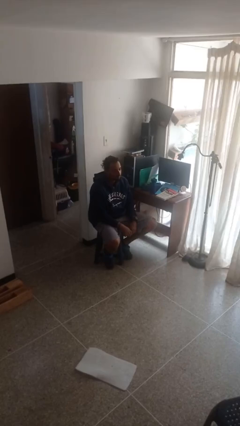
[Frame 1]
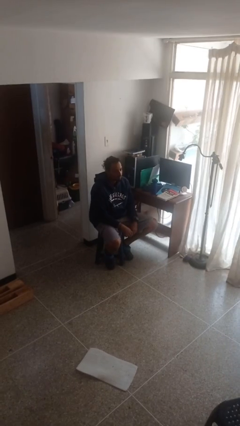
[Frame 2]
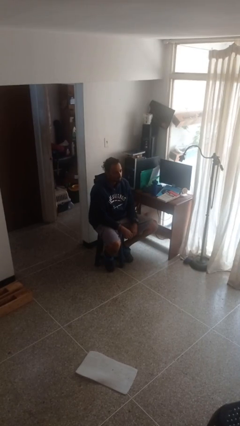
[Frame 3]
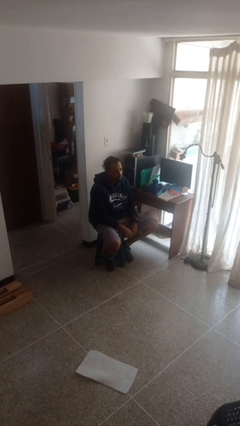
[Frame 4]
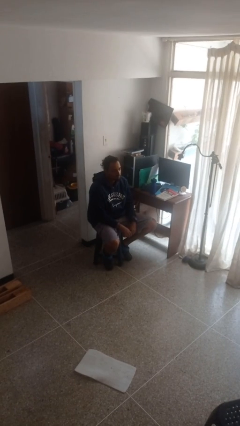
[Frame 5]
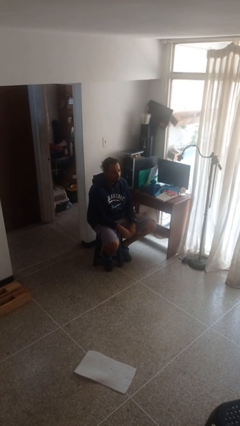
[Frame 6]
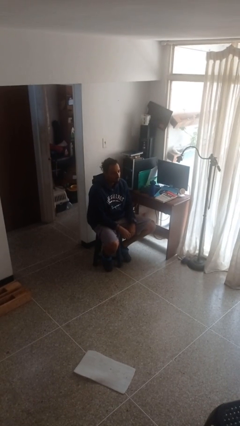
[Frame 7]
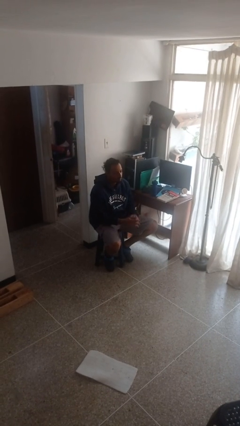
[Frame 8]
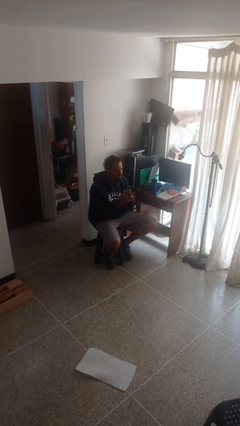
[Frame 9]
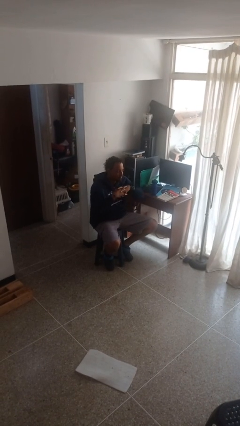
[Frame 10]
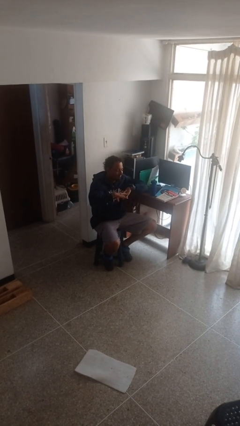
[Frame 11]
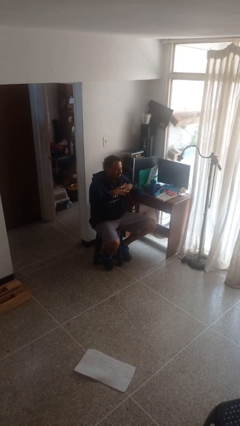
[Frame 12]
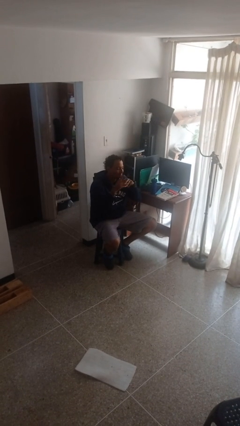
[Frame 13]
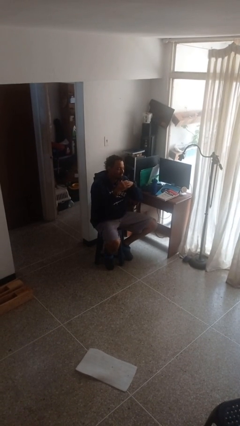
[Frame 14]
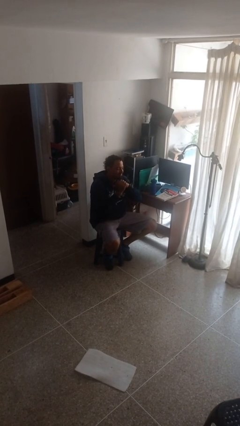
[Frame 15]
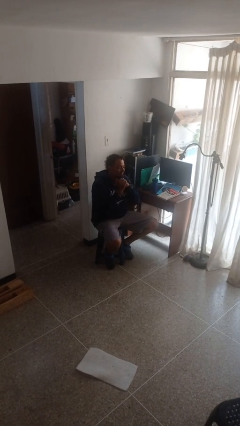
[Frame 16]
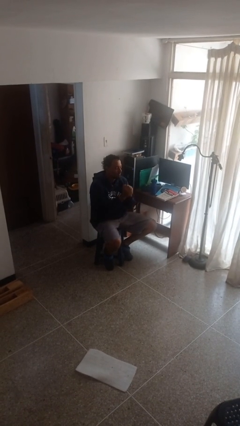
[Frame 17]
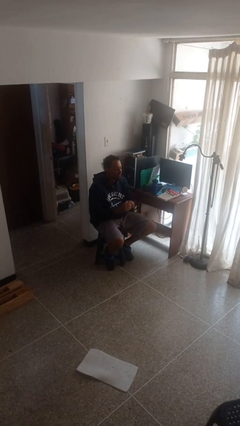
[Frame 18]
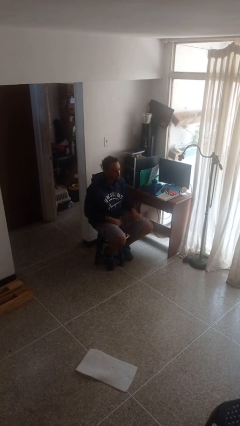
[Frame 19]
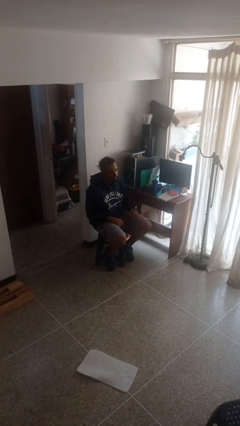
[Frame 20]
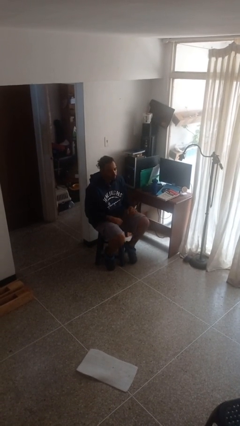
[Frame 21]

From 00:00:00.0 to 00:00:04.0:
person cracks knuckles

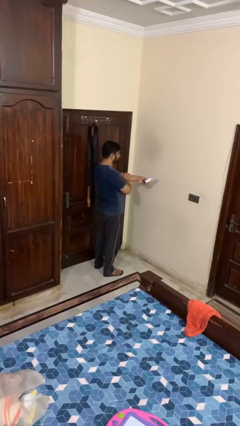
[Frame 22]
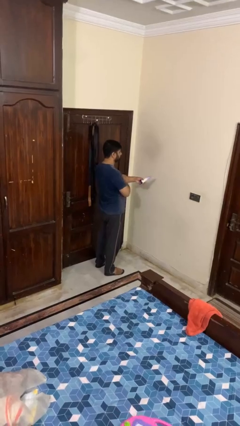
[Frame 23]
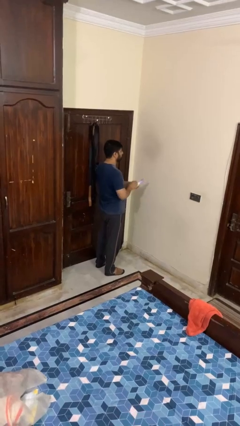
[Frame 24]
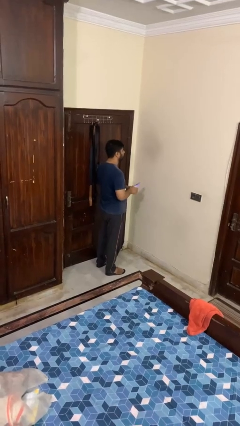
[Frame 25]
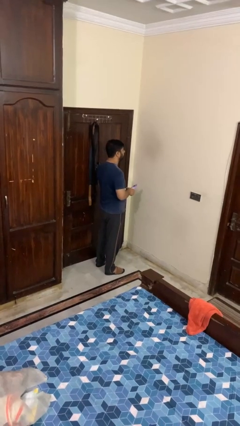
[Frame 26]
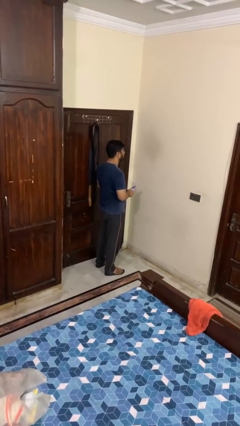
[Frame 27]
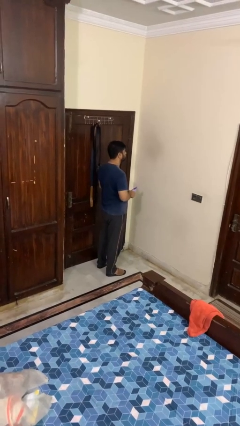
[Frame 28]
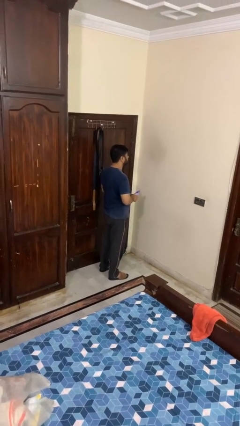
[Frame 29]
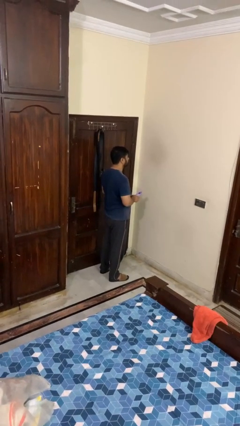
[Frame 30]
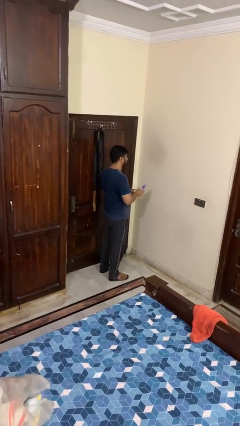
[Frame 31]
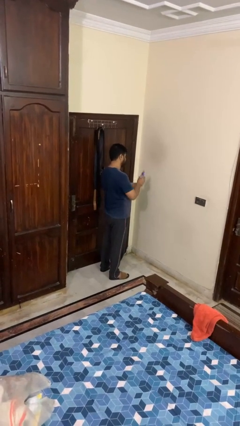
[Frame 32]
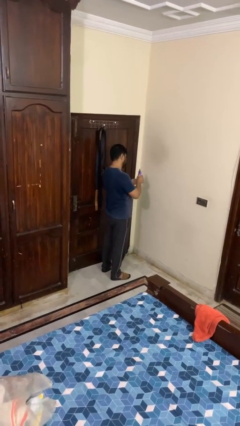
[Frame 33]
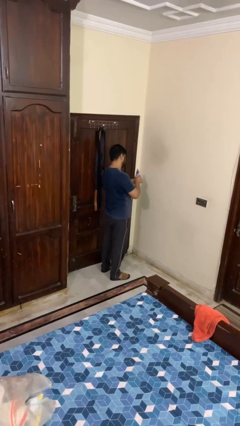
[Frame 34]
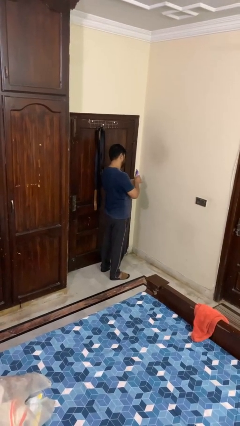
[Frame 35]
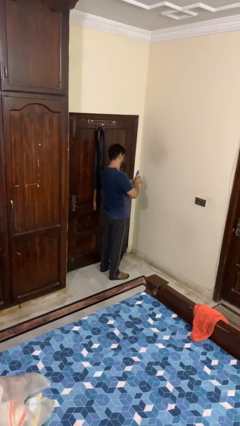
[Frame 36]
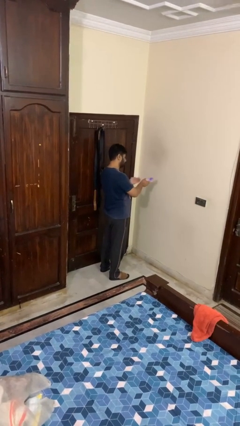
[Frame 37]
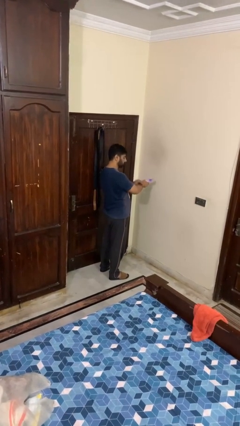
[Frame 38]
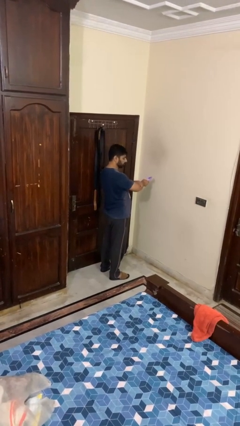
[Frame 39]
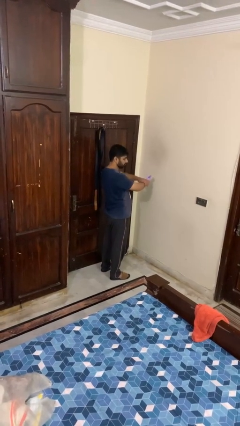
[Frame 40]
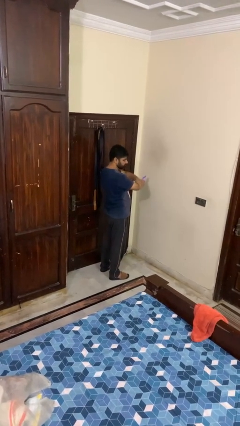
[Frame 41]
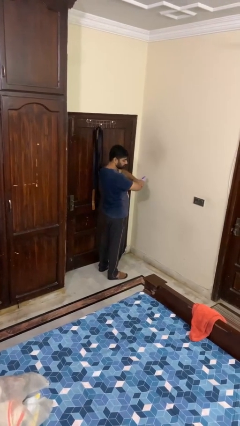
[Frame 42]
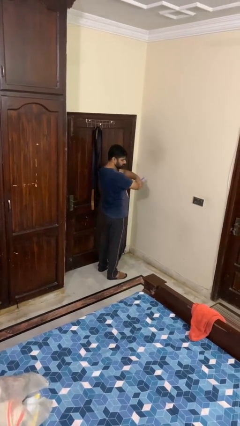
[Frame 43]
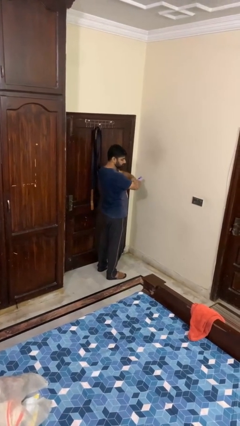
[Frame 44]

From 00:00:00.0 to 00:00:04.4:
person applies sunscreen

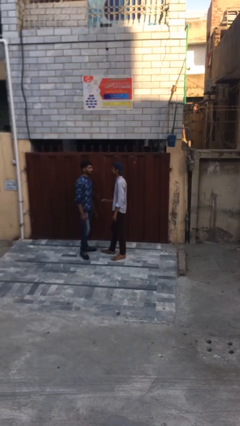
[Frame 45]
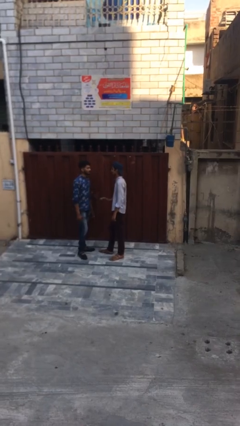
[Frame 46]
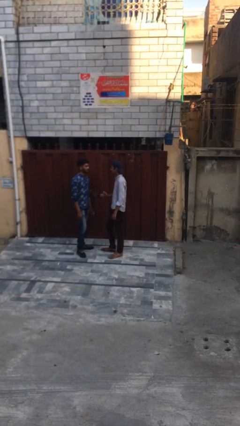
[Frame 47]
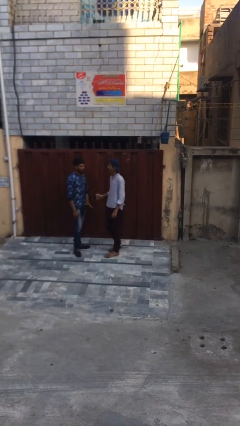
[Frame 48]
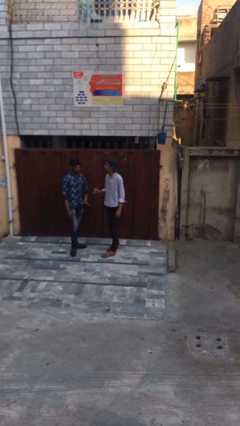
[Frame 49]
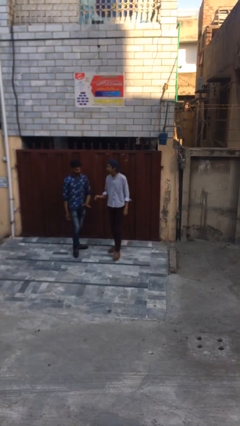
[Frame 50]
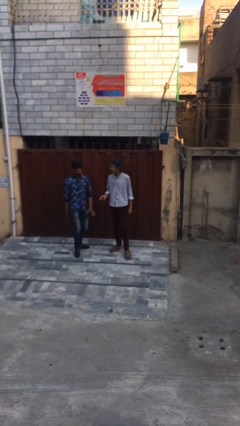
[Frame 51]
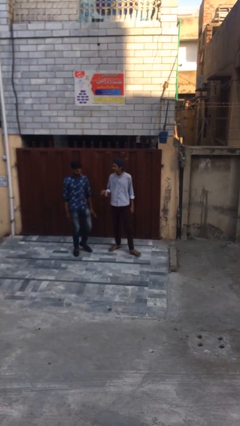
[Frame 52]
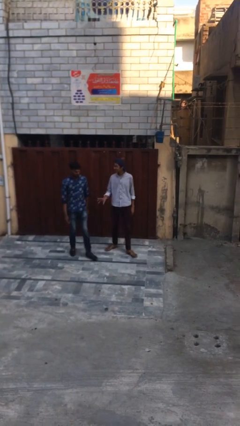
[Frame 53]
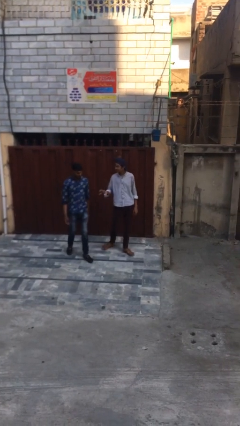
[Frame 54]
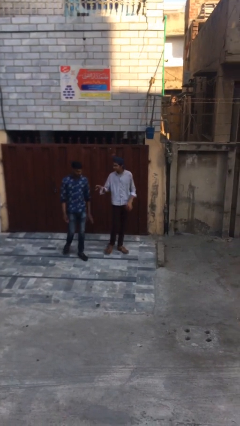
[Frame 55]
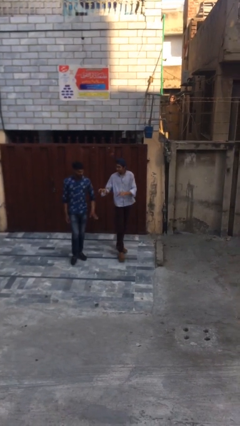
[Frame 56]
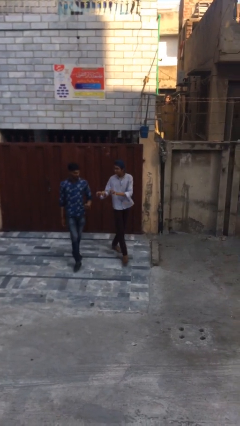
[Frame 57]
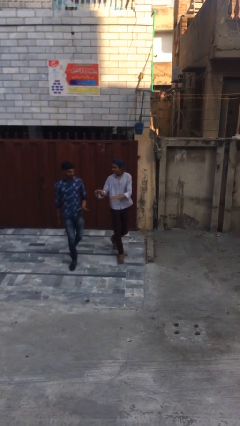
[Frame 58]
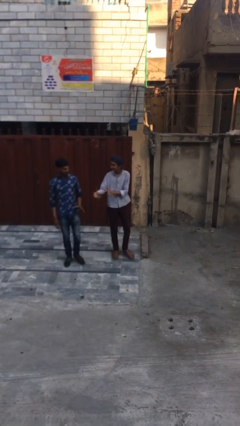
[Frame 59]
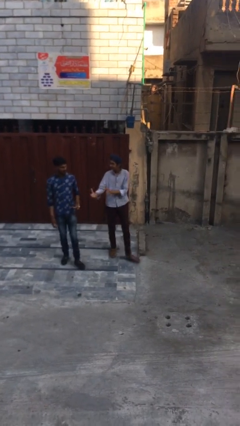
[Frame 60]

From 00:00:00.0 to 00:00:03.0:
person talks to person

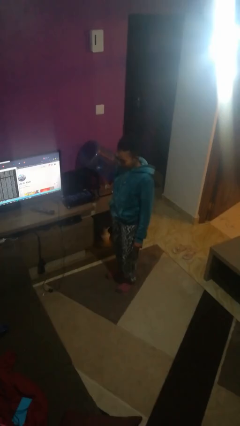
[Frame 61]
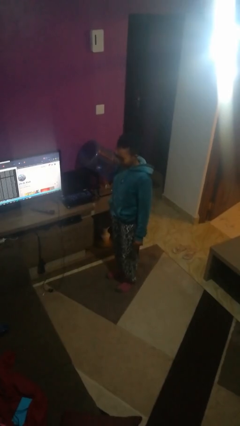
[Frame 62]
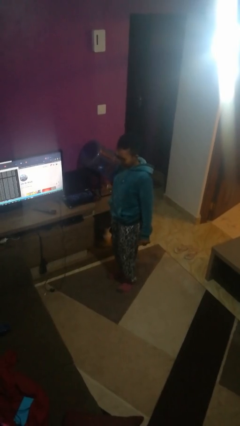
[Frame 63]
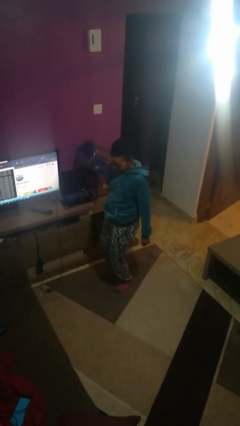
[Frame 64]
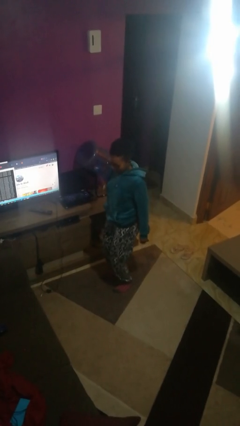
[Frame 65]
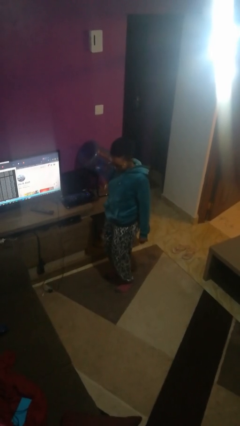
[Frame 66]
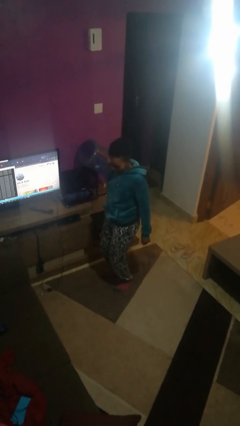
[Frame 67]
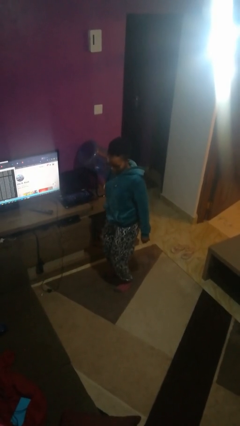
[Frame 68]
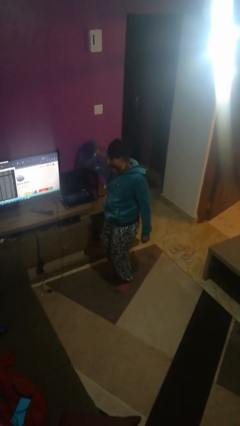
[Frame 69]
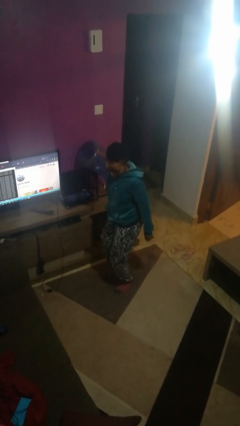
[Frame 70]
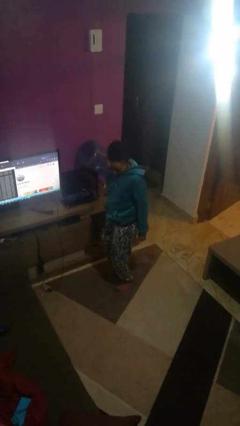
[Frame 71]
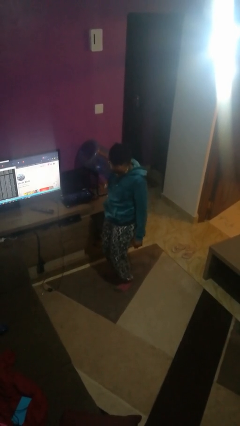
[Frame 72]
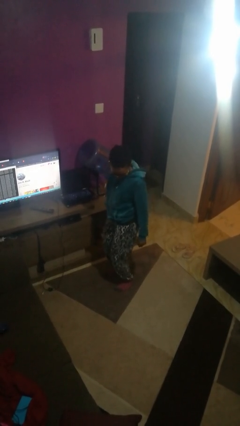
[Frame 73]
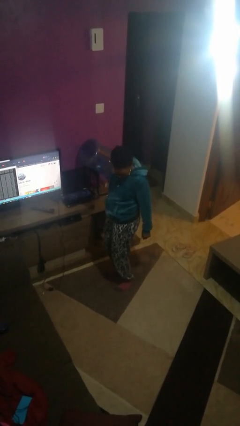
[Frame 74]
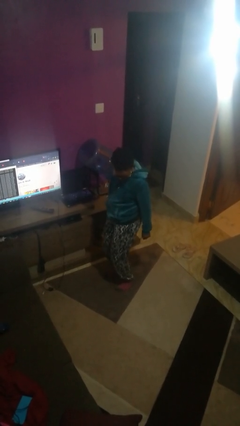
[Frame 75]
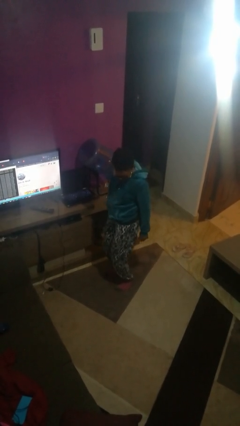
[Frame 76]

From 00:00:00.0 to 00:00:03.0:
person wiggles hips

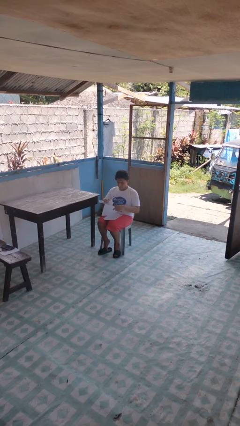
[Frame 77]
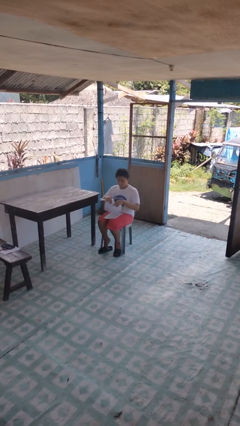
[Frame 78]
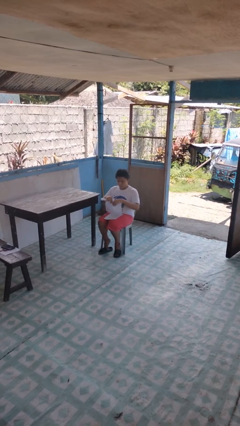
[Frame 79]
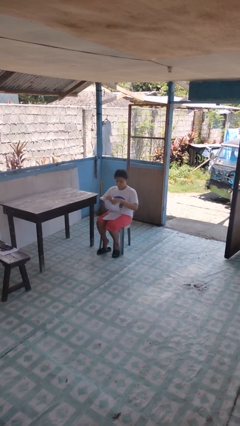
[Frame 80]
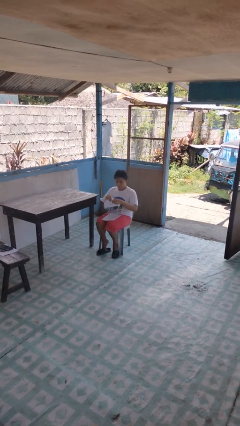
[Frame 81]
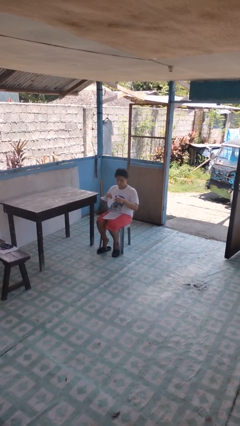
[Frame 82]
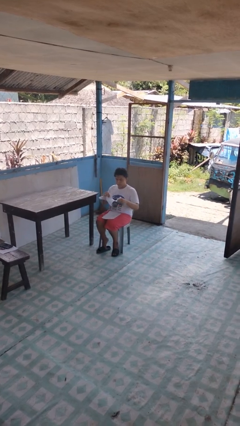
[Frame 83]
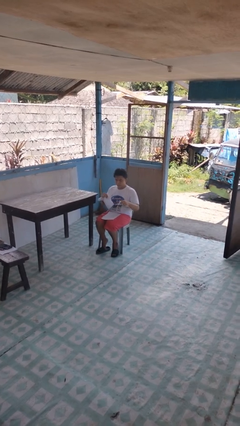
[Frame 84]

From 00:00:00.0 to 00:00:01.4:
person tears paper

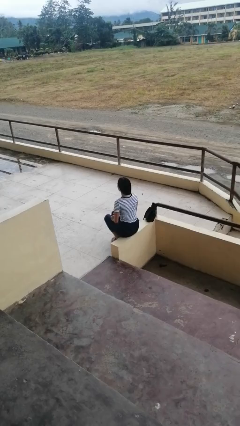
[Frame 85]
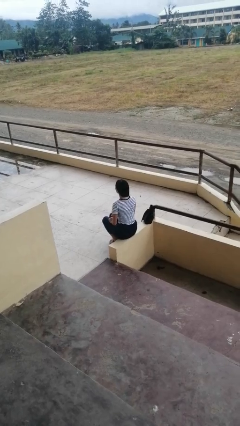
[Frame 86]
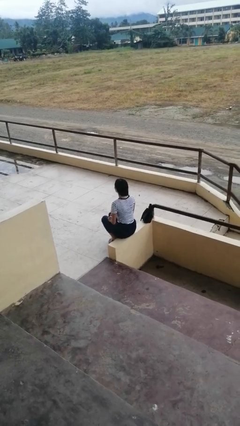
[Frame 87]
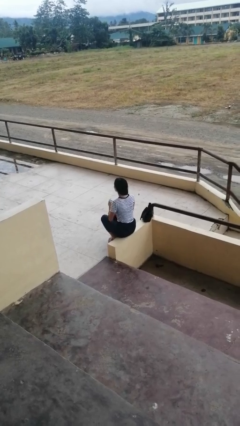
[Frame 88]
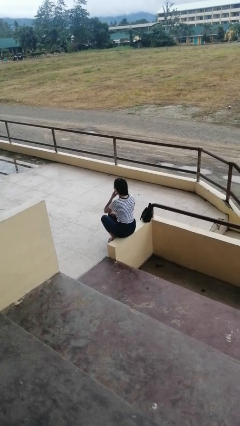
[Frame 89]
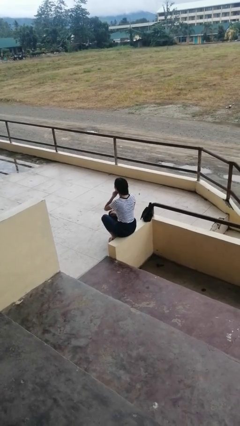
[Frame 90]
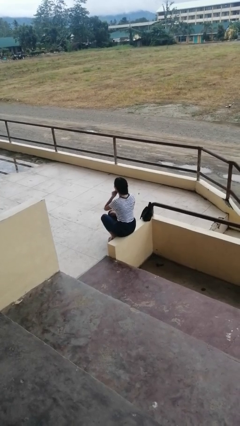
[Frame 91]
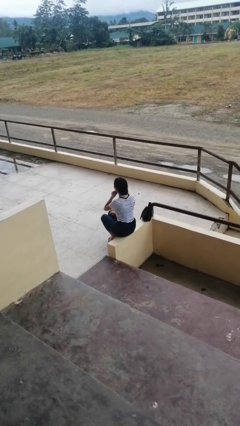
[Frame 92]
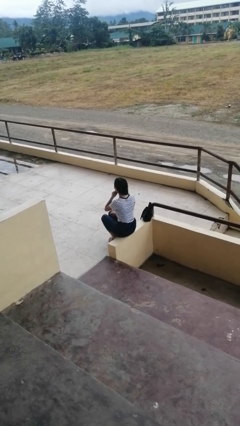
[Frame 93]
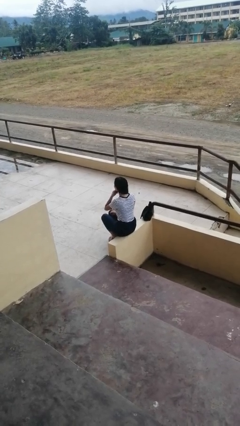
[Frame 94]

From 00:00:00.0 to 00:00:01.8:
person strokes chin
